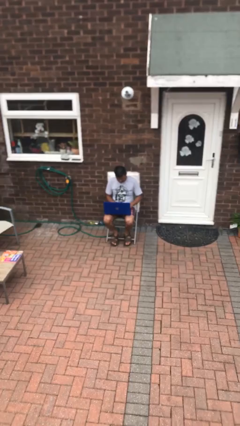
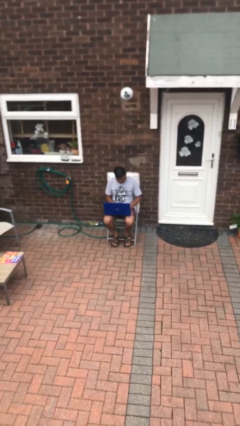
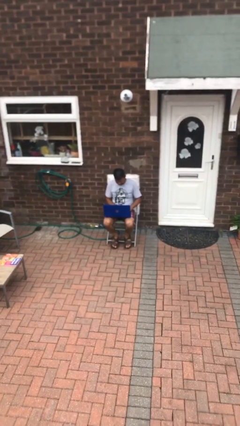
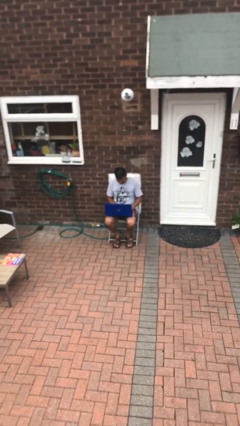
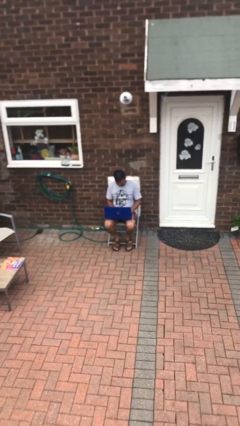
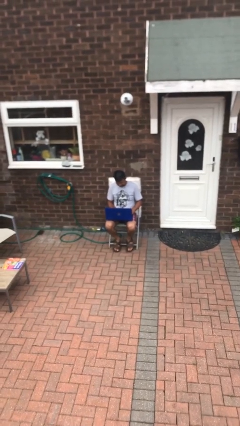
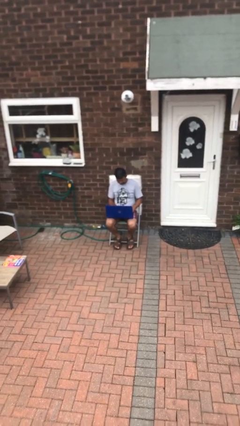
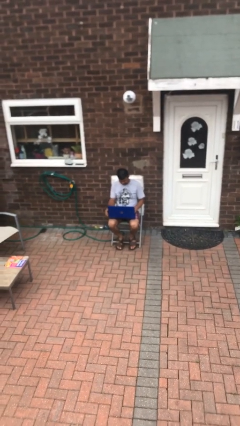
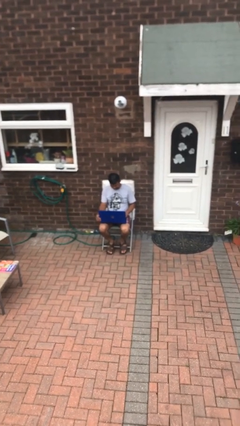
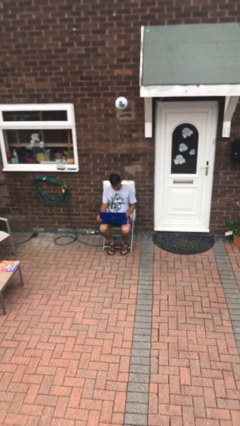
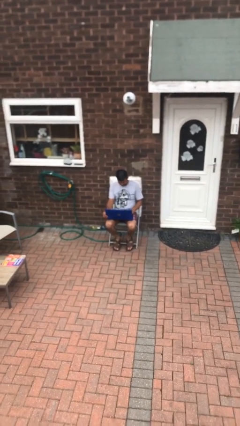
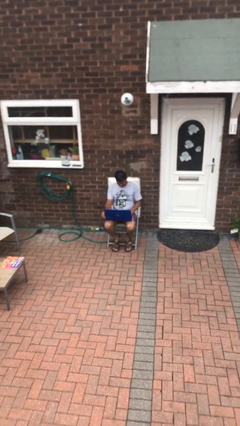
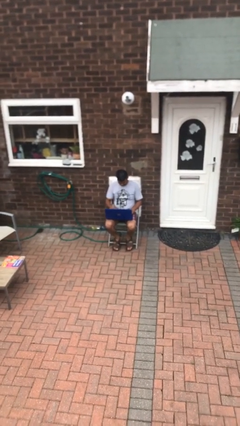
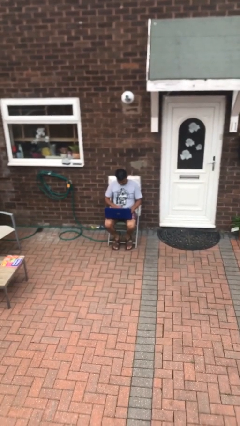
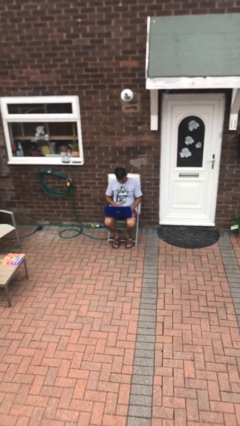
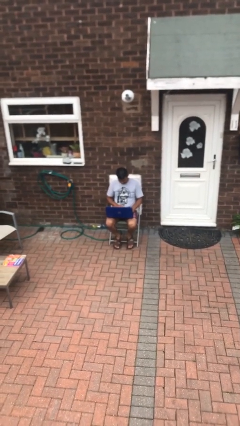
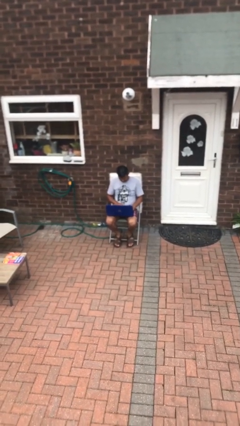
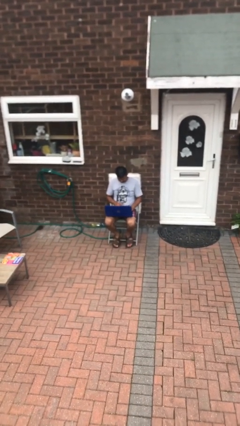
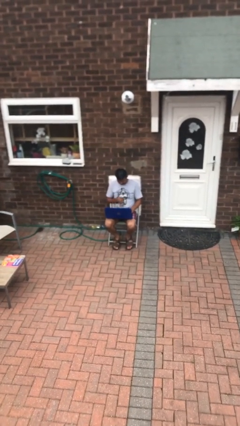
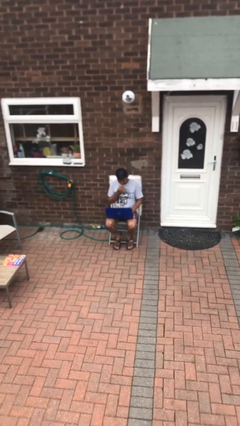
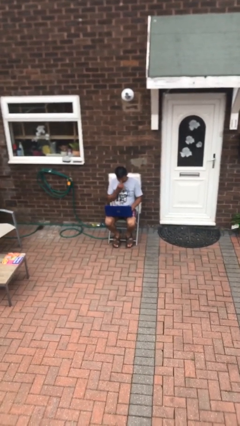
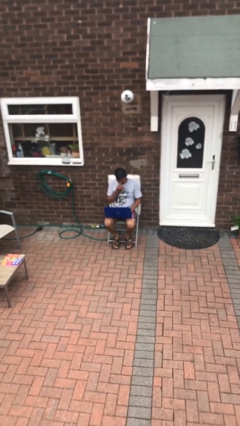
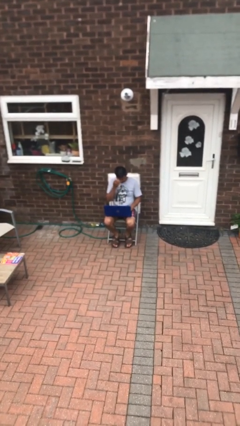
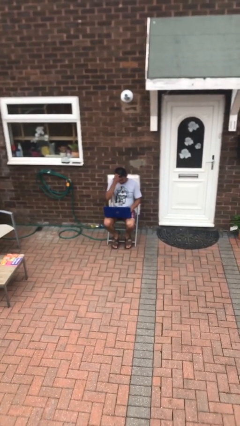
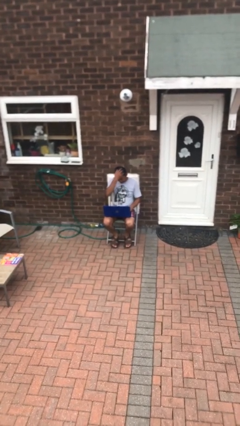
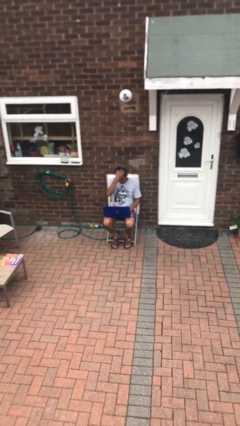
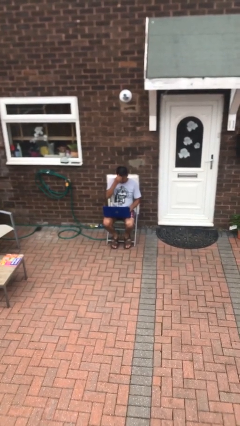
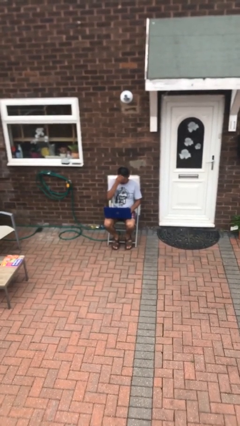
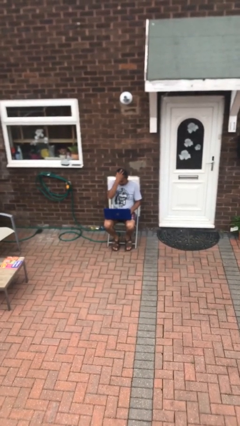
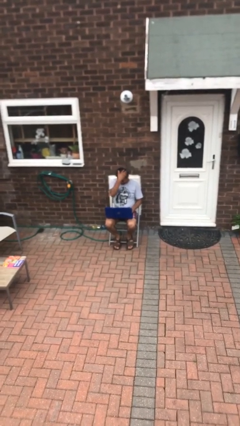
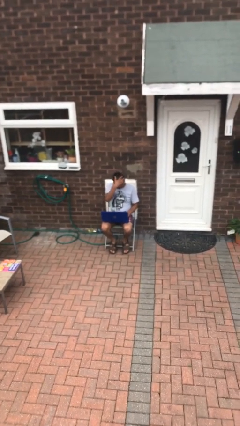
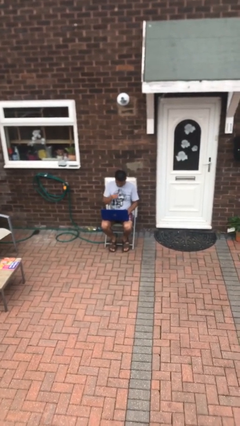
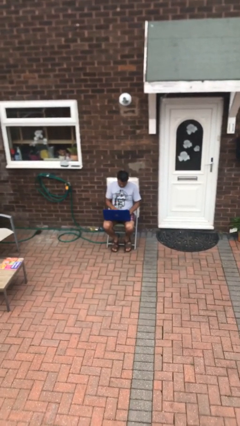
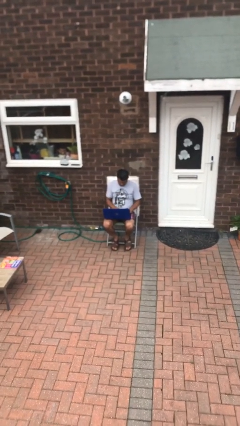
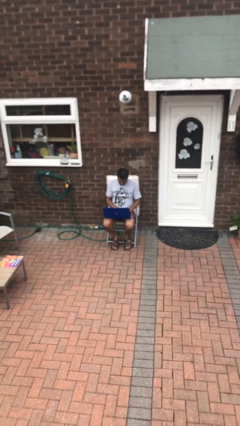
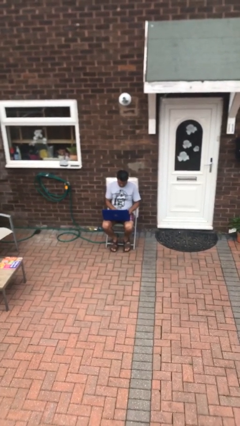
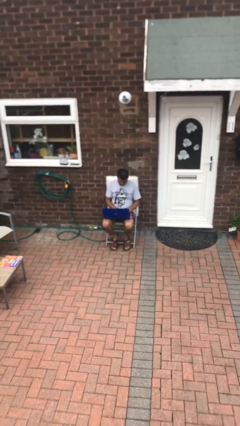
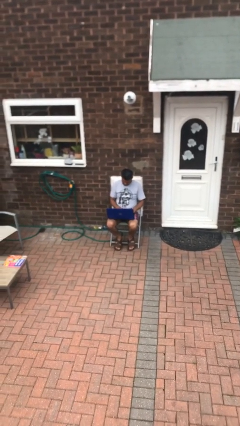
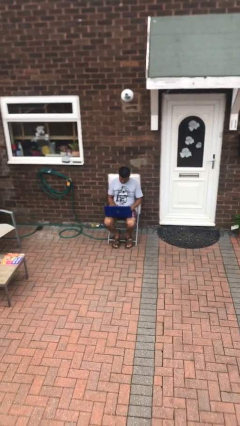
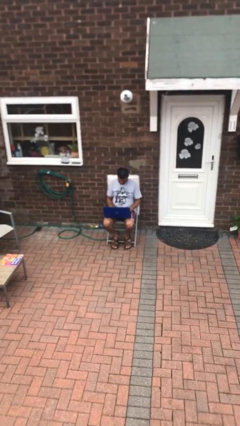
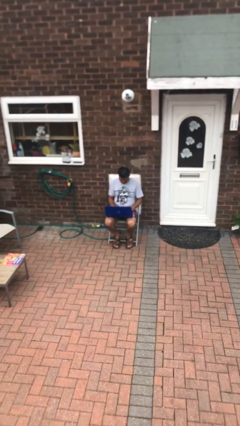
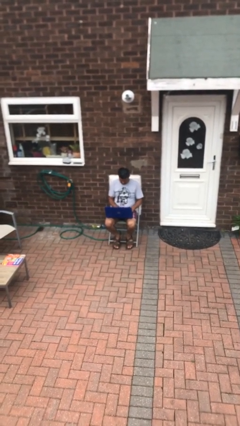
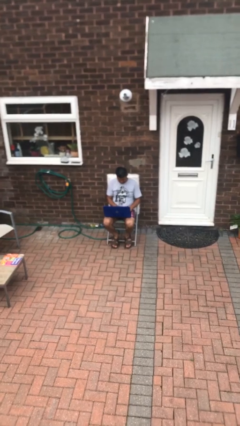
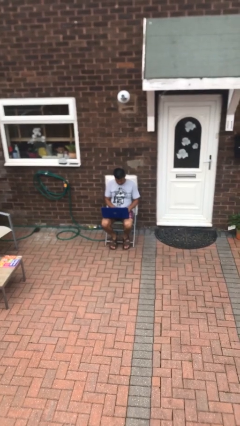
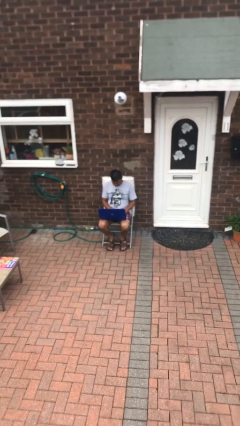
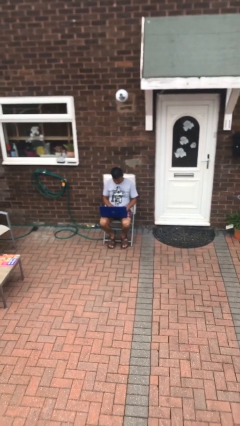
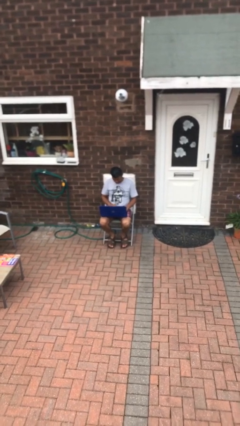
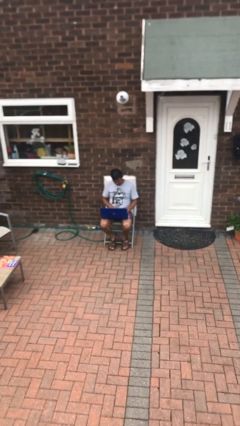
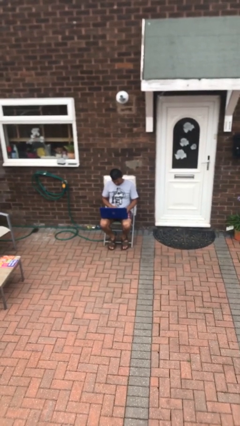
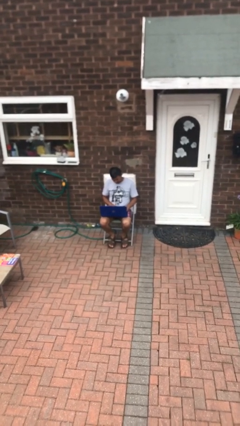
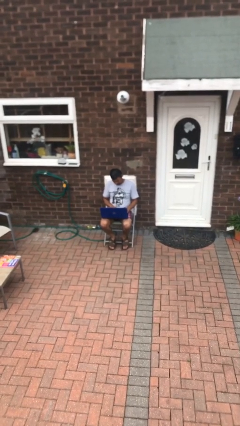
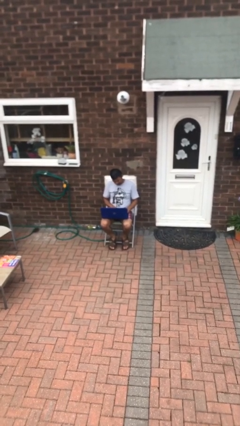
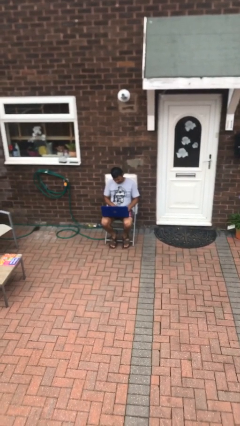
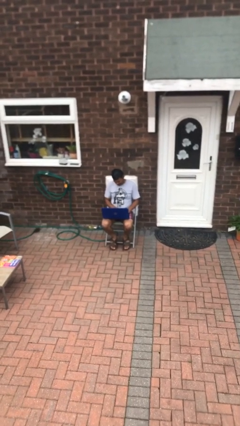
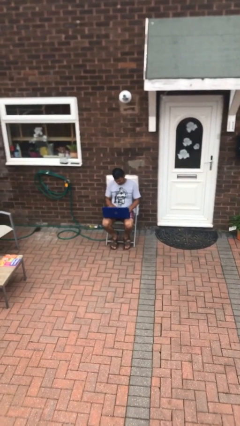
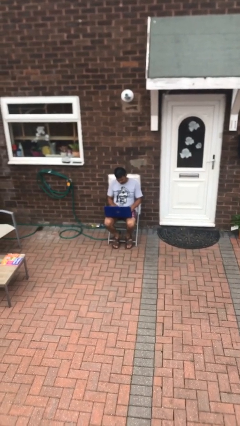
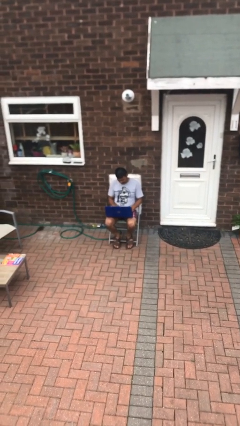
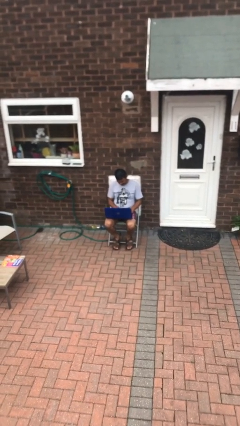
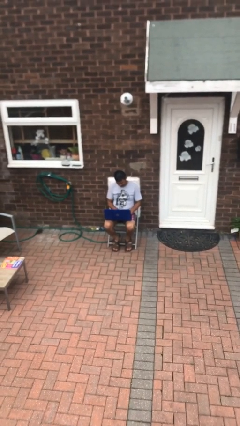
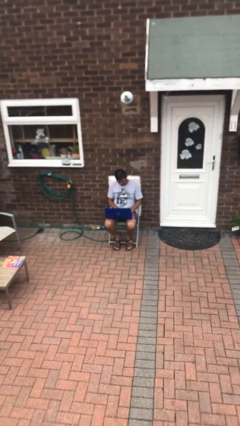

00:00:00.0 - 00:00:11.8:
person interacts with laptop

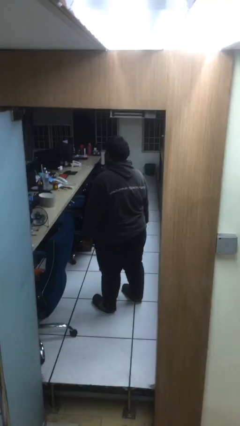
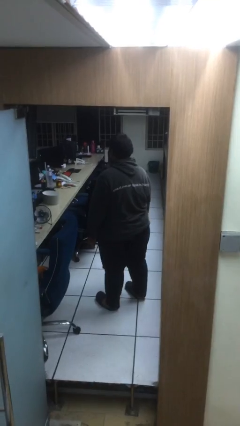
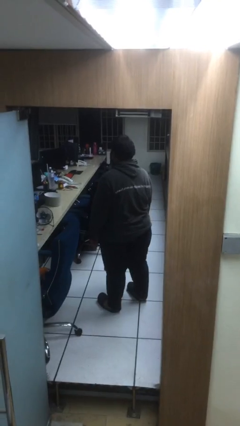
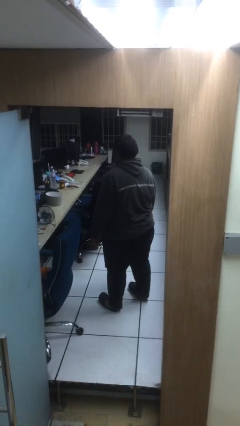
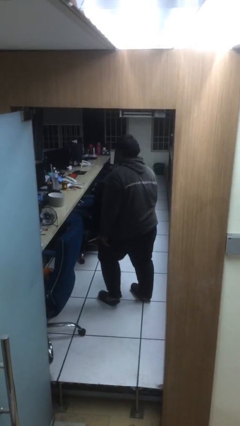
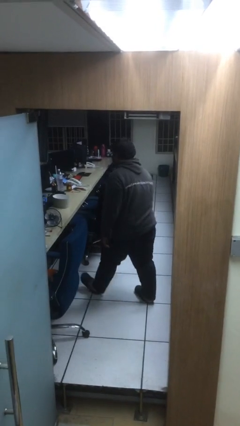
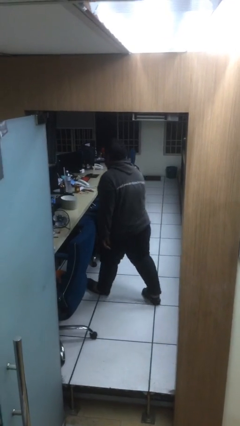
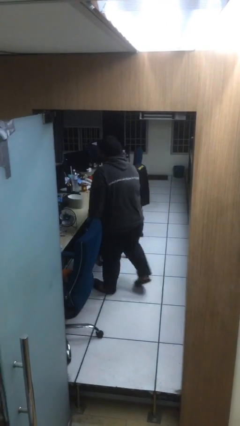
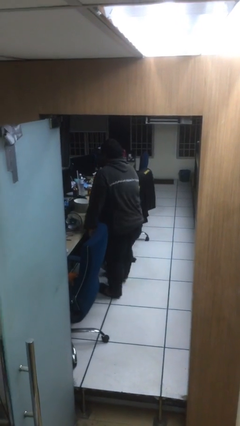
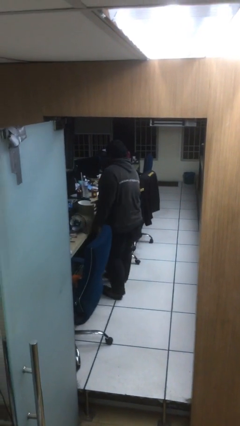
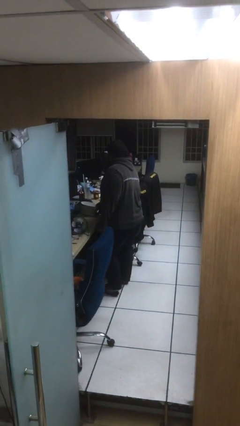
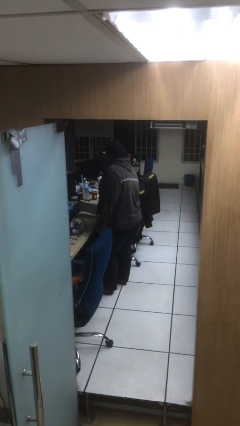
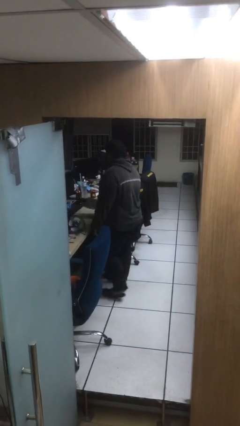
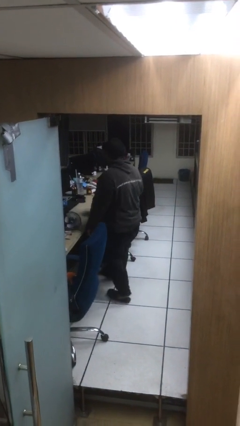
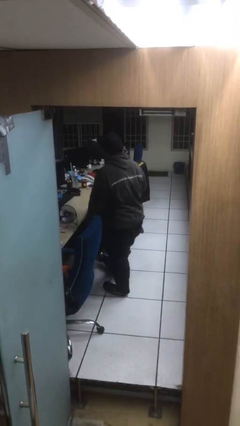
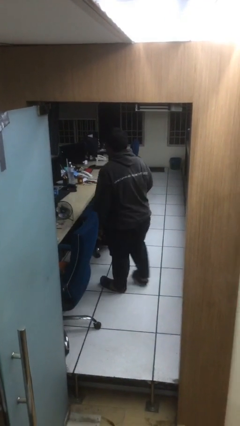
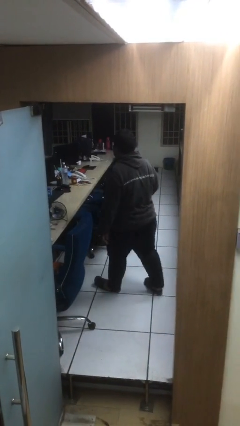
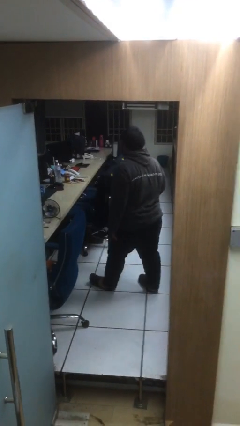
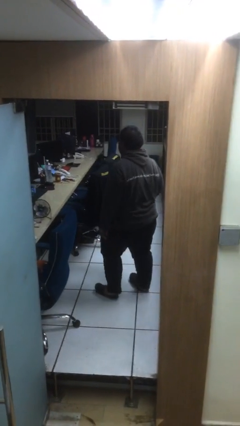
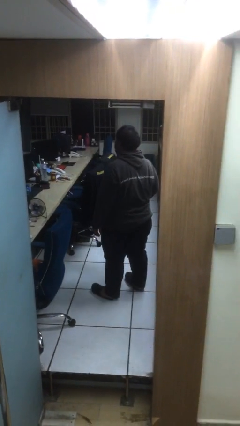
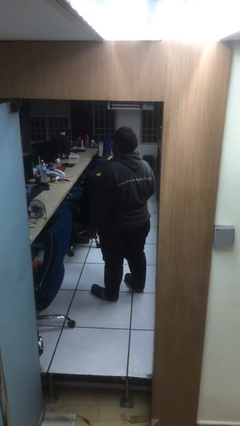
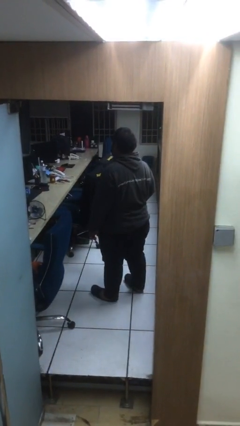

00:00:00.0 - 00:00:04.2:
person picks up object from table

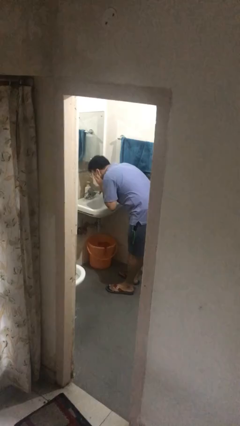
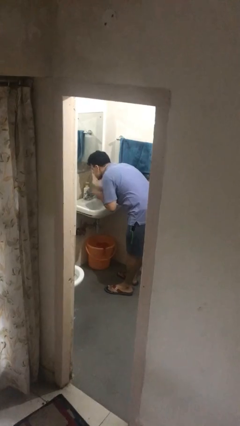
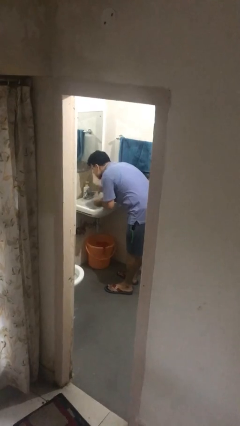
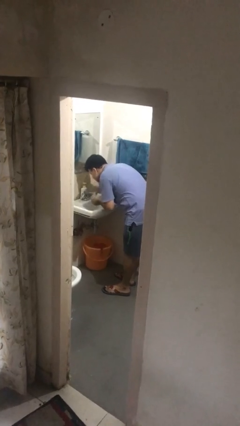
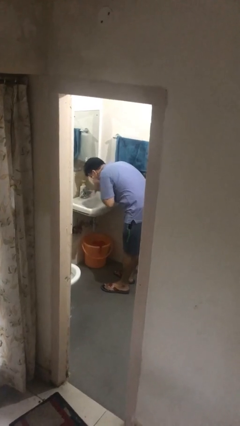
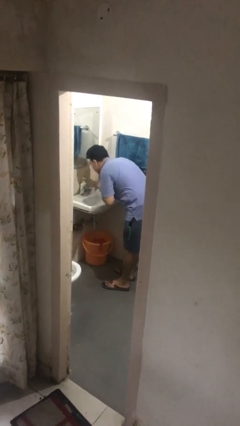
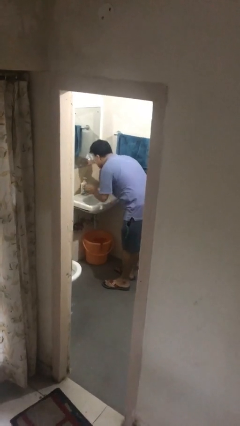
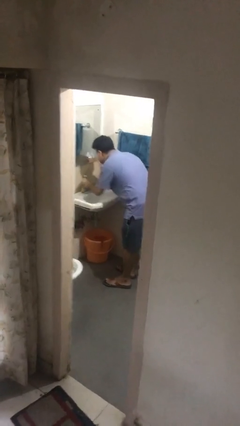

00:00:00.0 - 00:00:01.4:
person washes face
